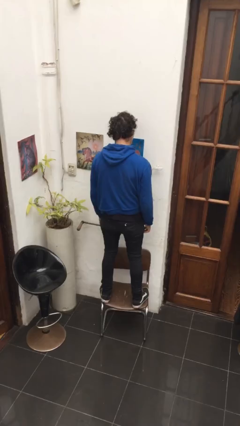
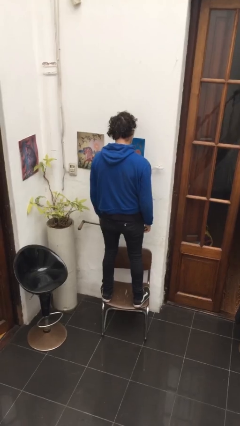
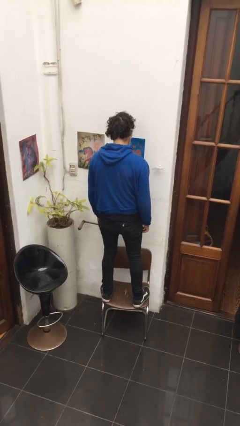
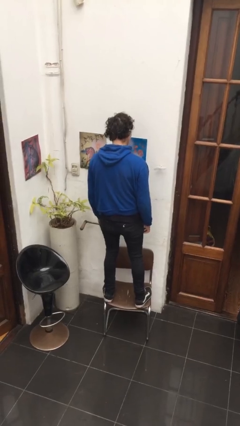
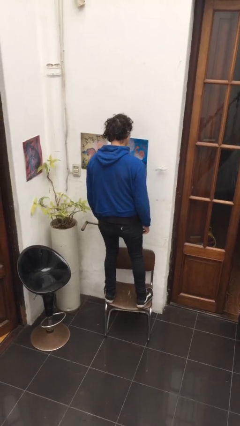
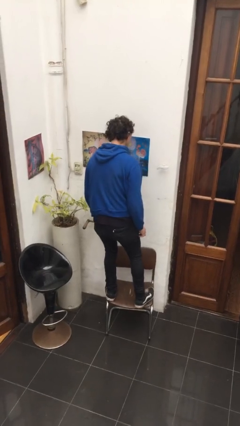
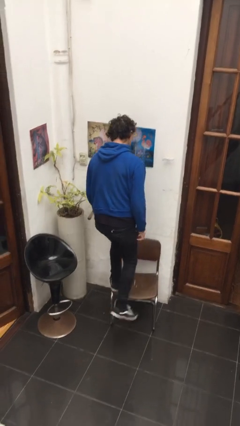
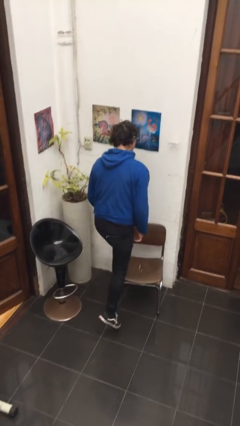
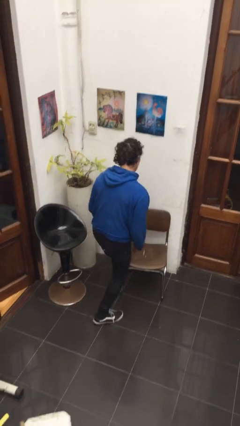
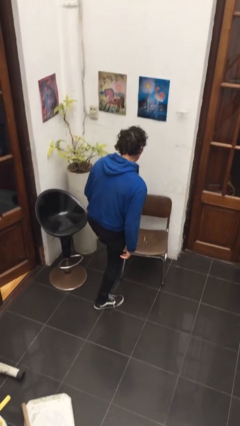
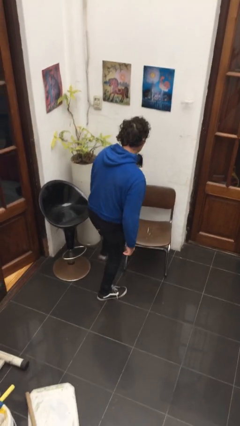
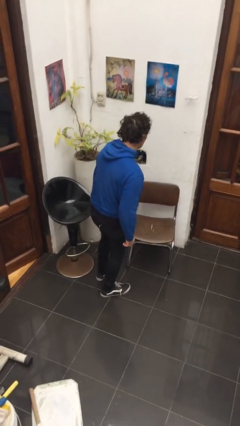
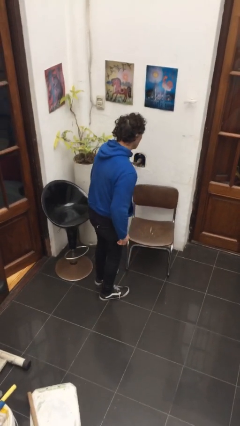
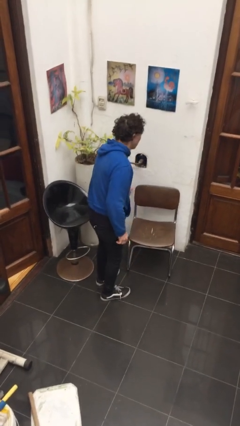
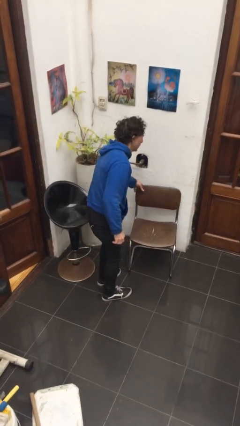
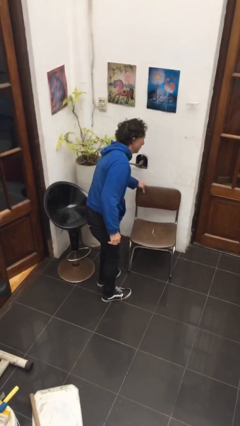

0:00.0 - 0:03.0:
person climbs off chair

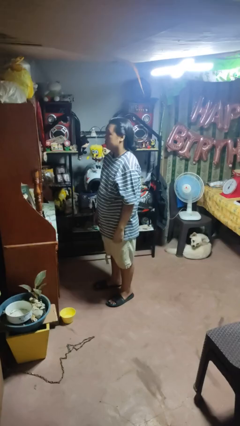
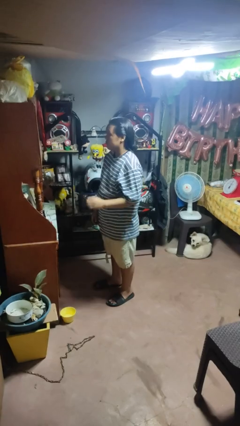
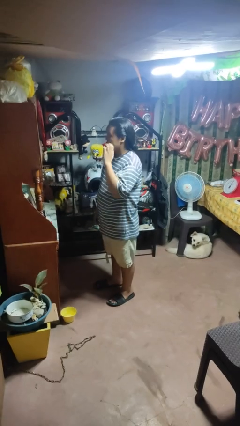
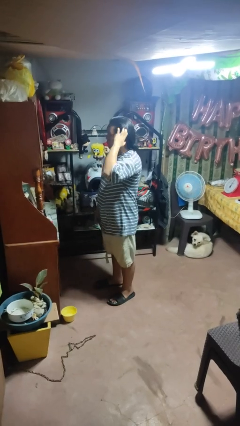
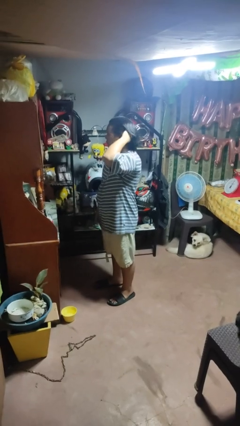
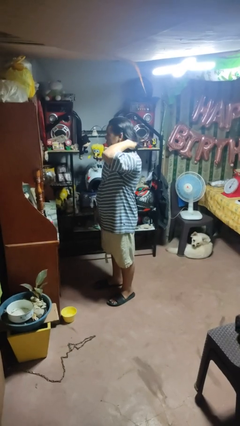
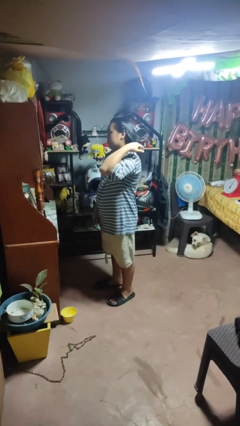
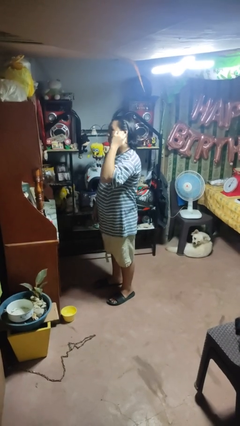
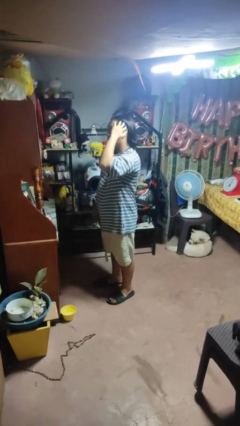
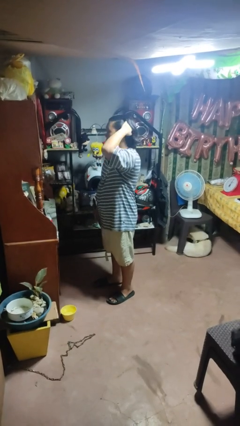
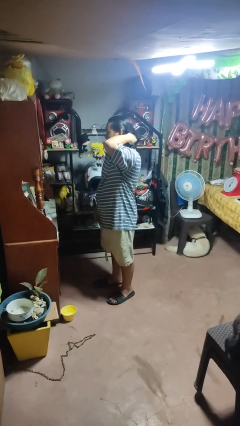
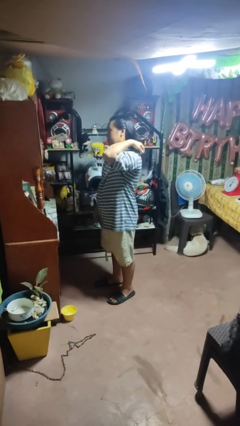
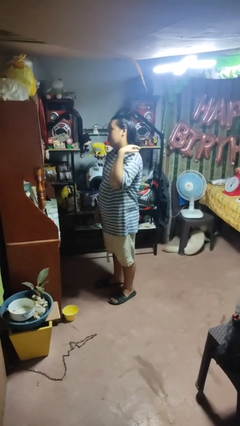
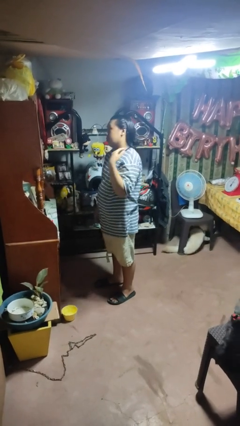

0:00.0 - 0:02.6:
person strokes hair

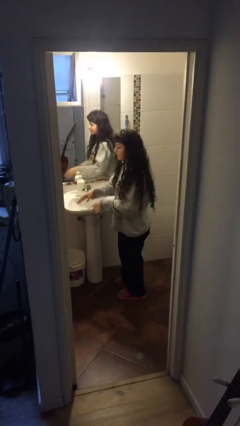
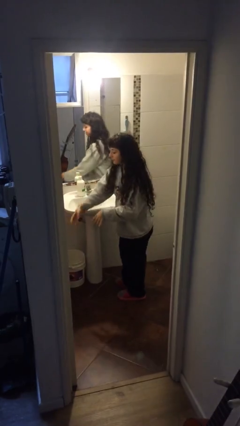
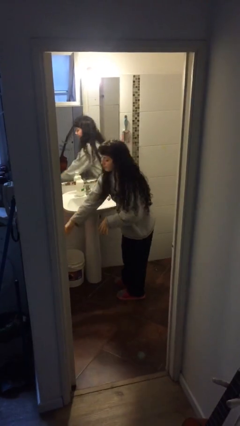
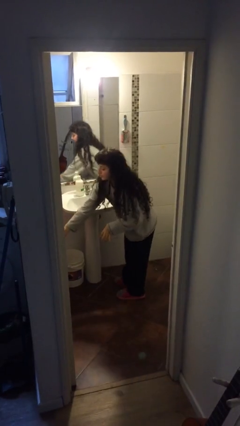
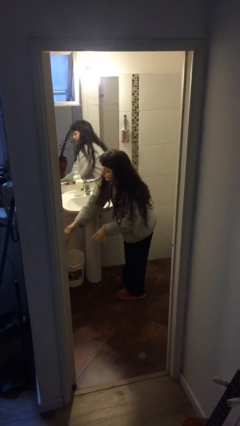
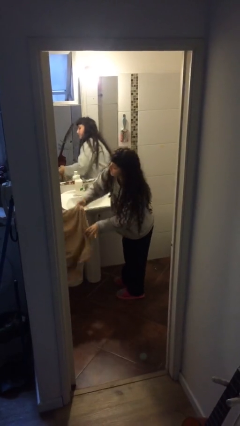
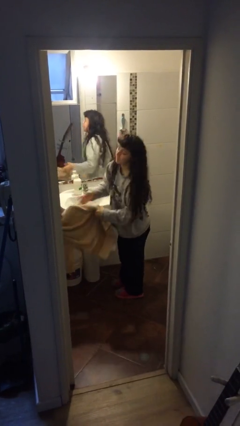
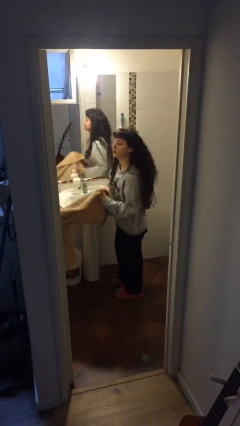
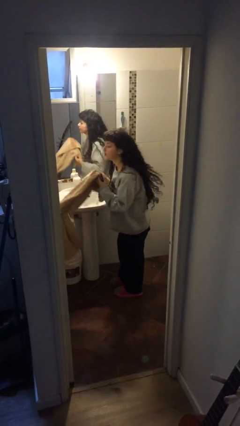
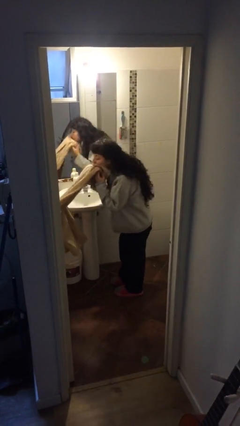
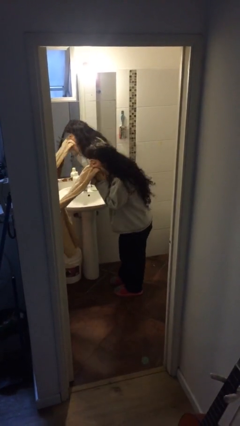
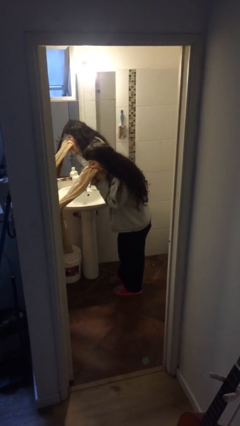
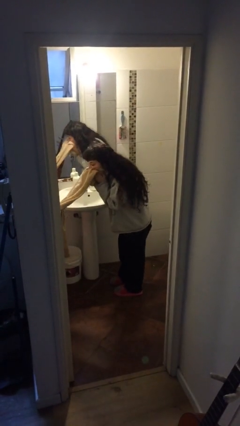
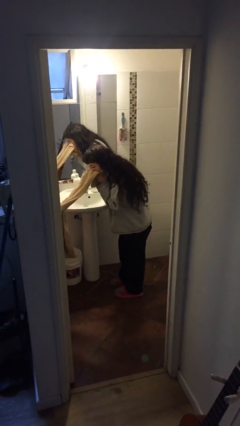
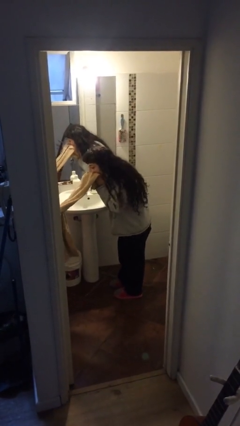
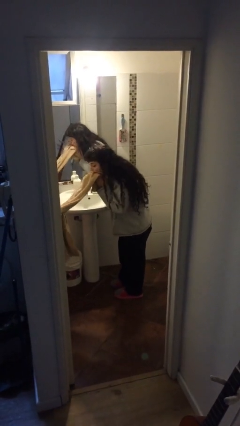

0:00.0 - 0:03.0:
person dries face with towel

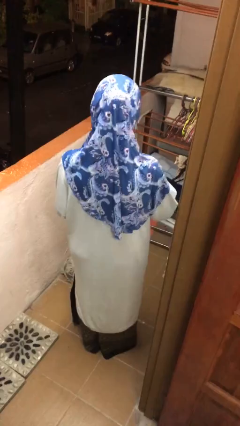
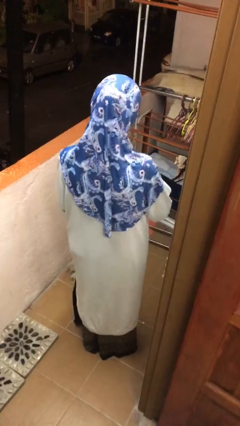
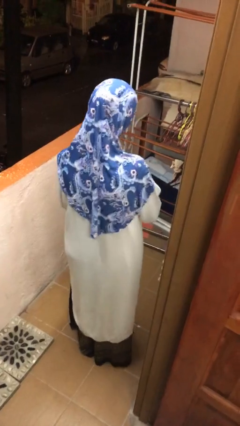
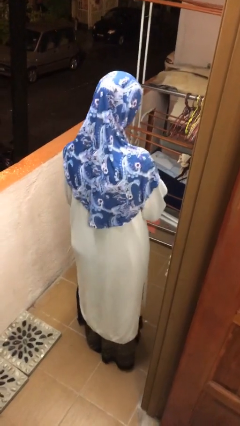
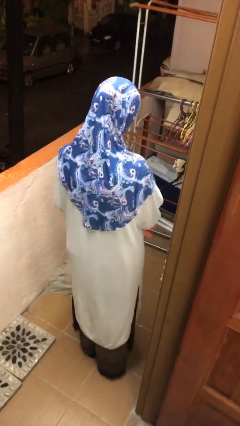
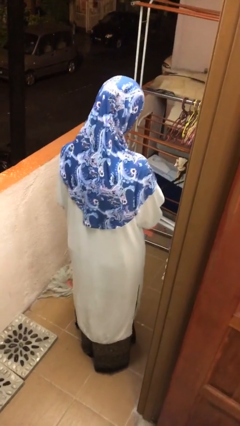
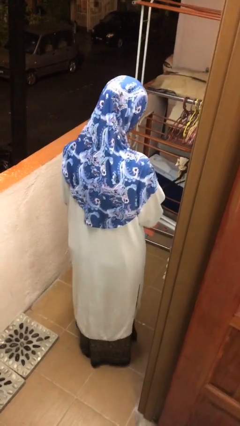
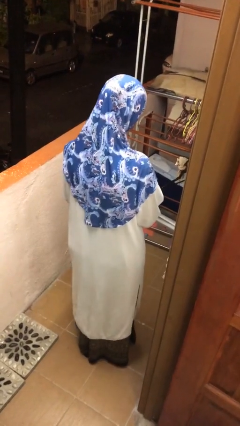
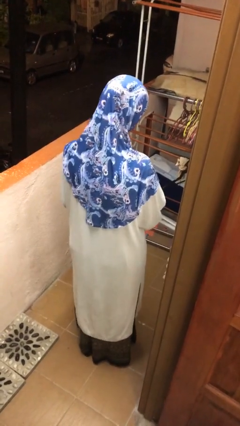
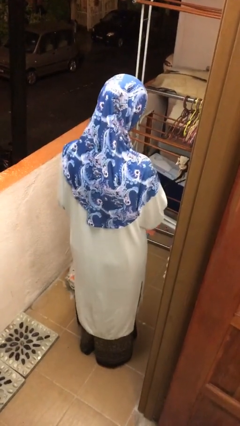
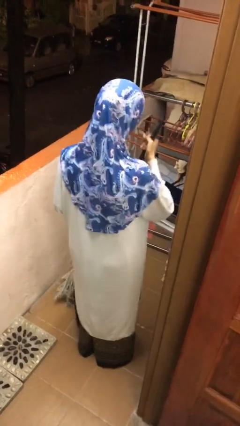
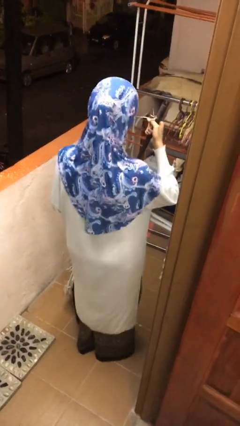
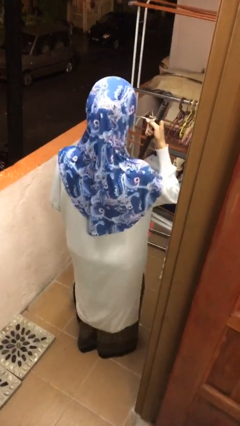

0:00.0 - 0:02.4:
person mops

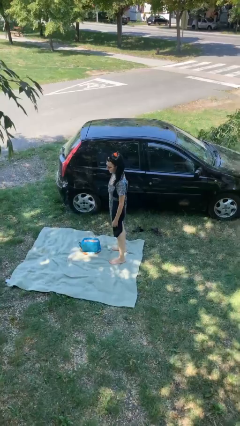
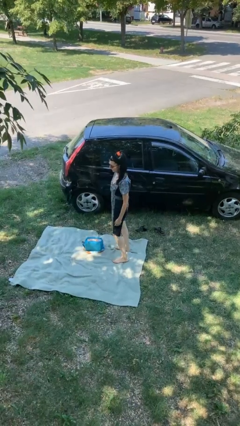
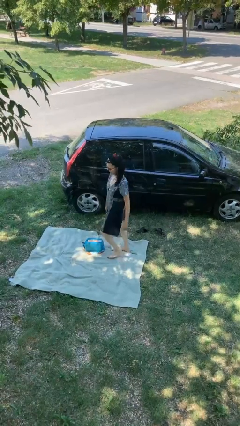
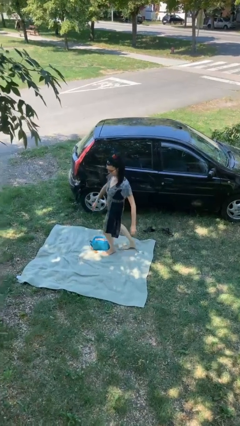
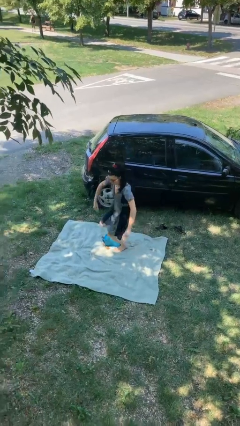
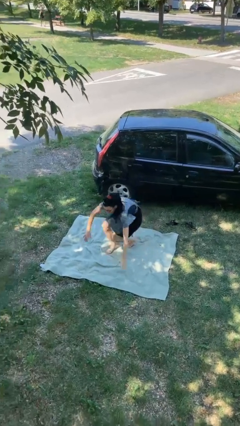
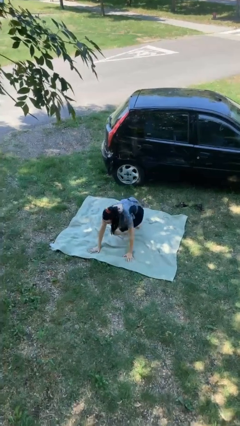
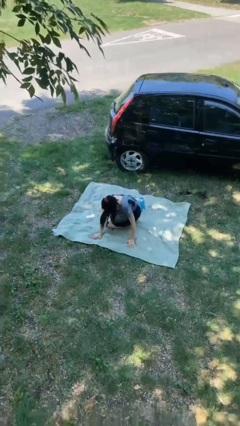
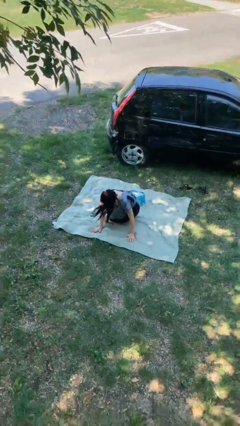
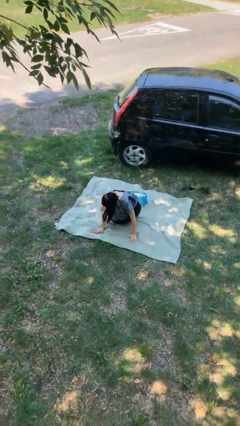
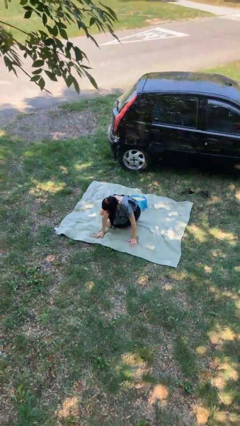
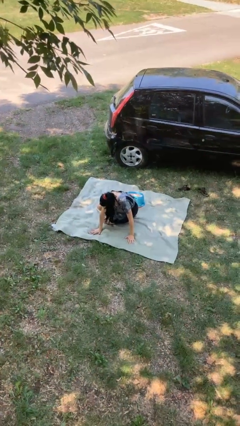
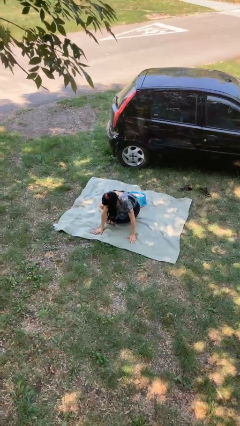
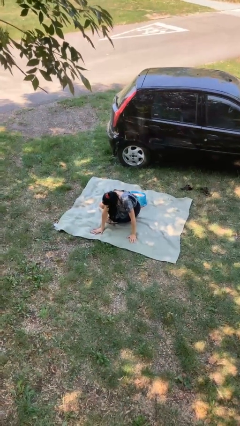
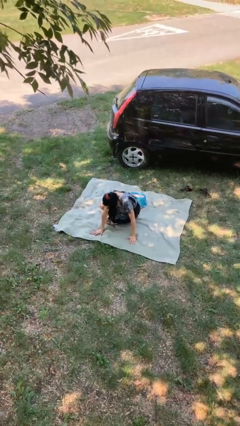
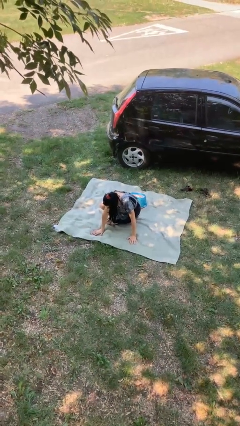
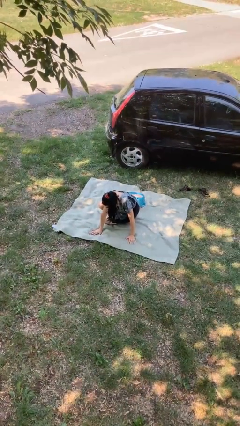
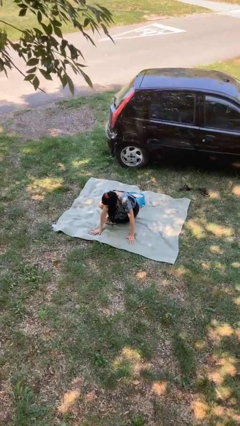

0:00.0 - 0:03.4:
person trips on object on floor

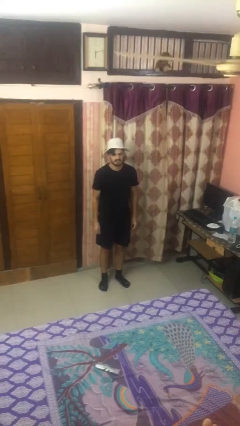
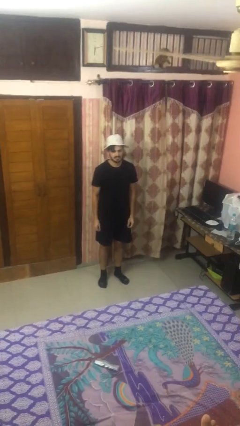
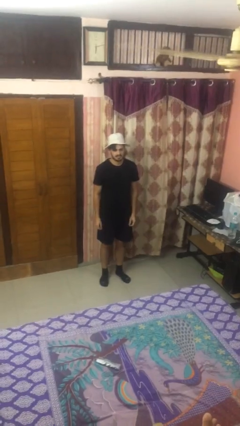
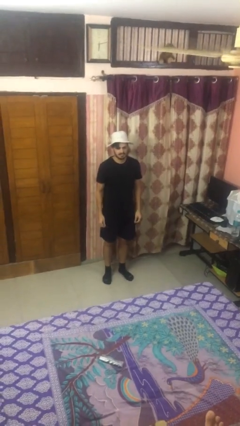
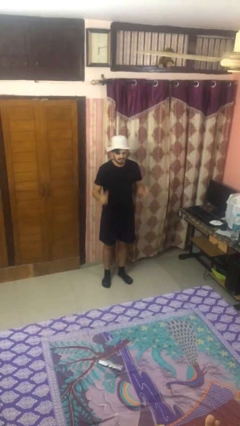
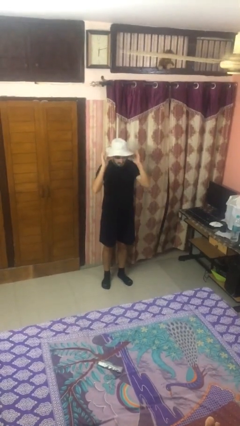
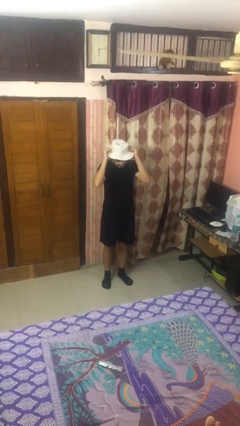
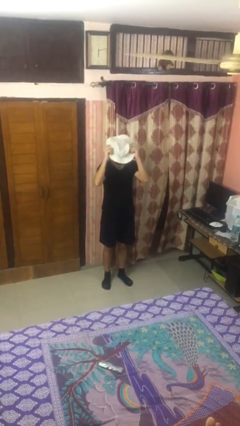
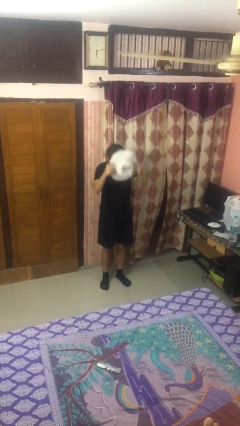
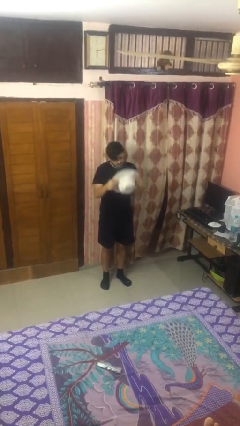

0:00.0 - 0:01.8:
person takes off hat

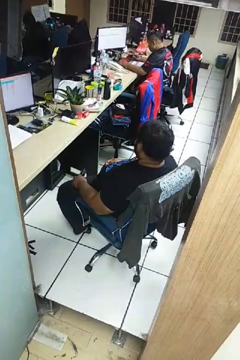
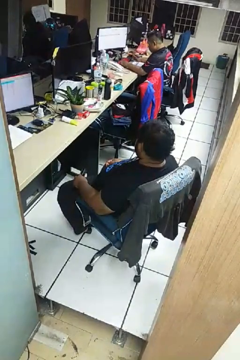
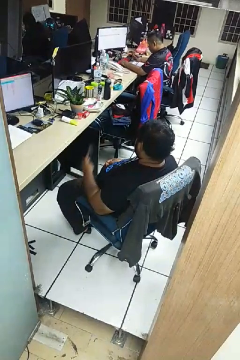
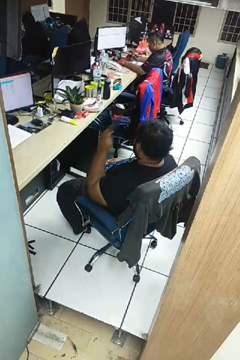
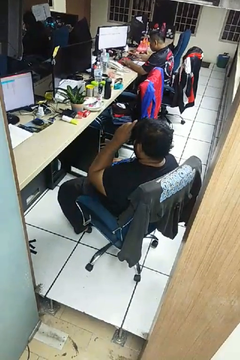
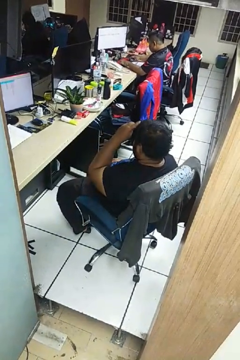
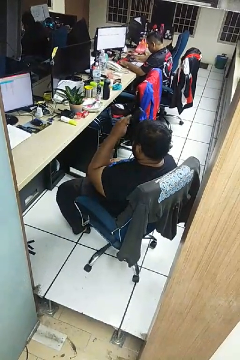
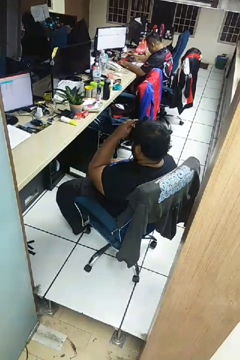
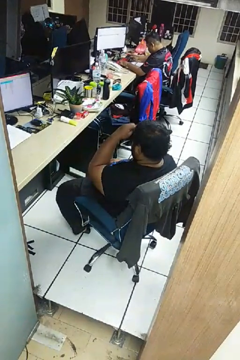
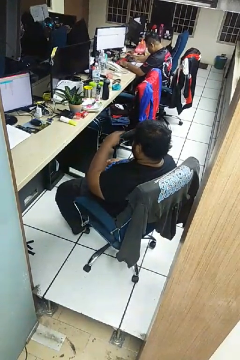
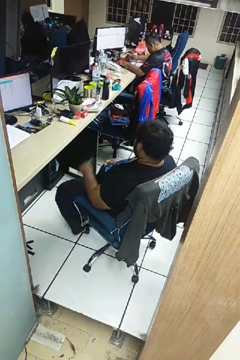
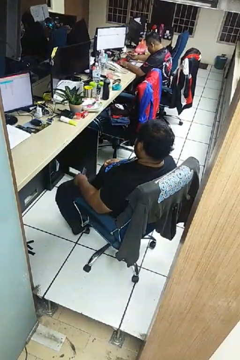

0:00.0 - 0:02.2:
person brushes hair
